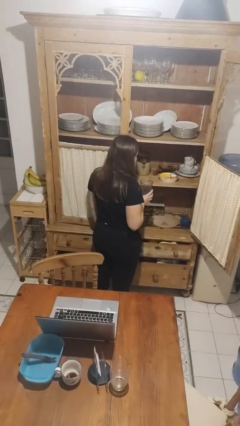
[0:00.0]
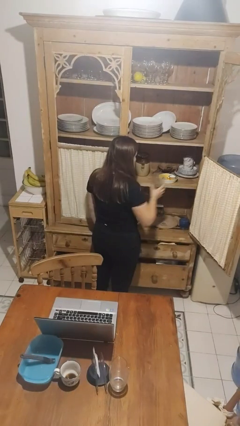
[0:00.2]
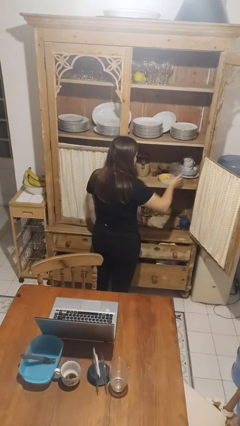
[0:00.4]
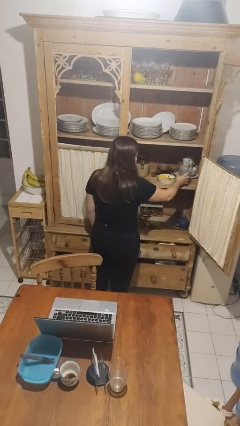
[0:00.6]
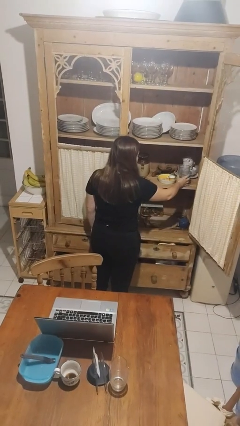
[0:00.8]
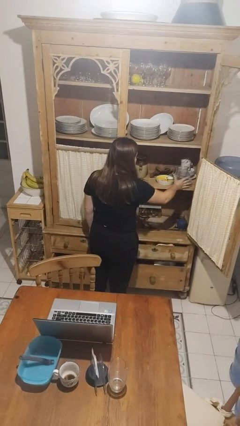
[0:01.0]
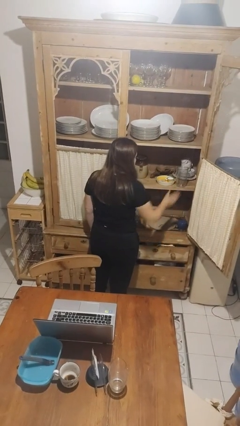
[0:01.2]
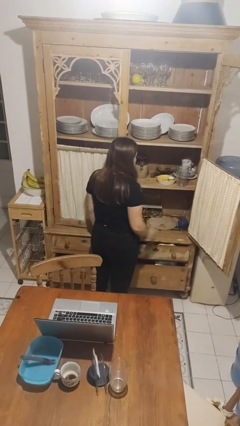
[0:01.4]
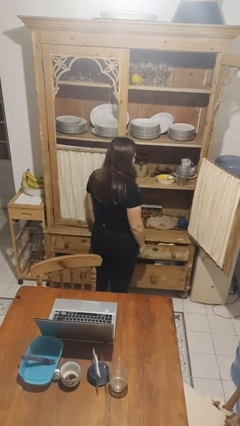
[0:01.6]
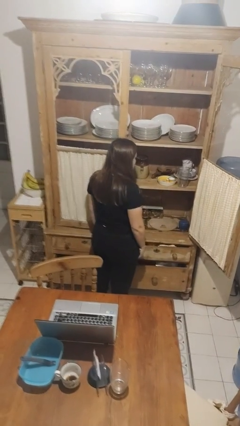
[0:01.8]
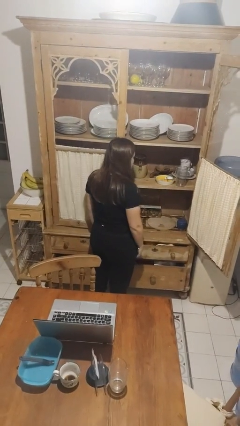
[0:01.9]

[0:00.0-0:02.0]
person puts object in cabinet

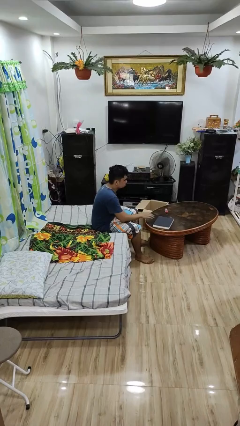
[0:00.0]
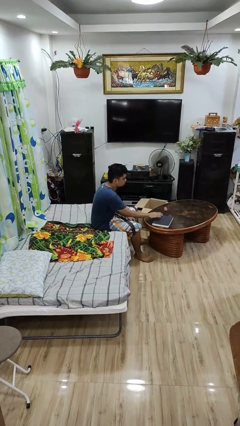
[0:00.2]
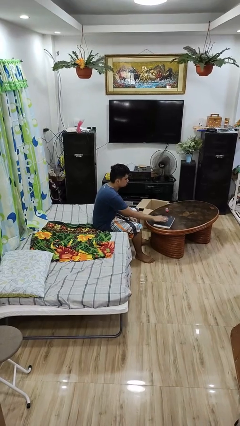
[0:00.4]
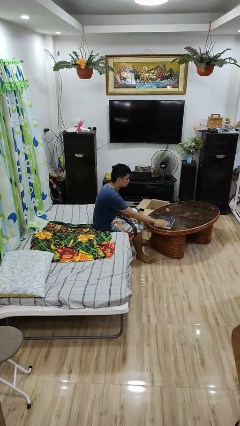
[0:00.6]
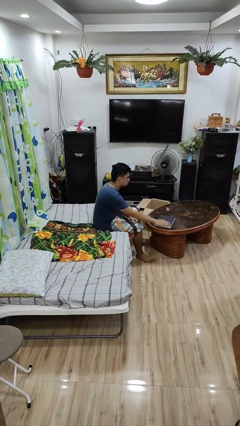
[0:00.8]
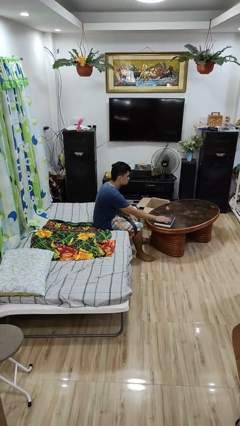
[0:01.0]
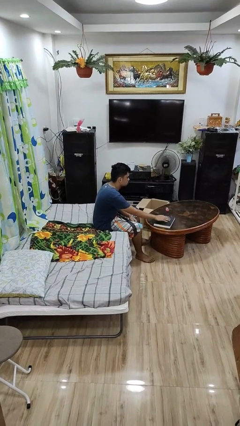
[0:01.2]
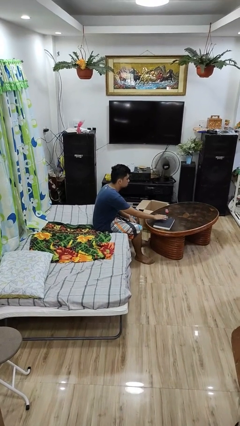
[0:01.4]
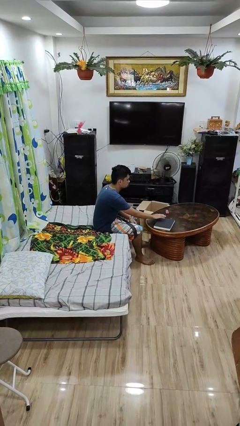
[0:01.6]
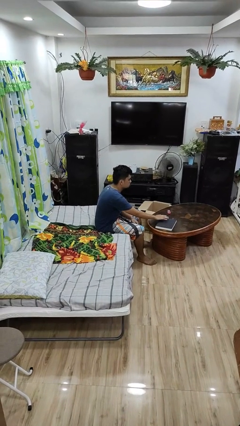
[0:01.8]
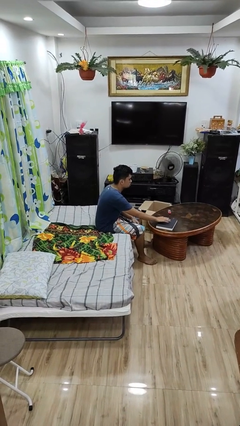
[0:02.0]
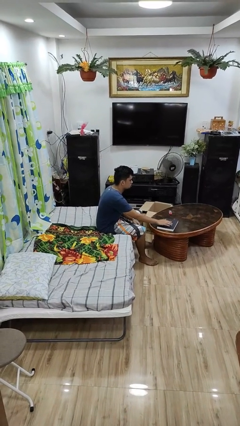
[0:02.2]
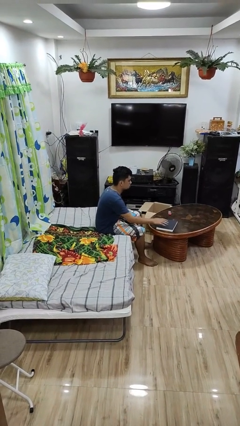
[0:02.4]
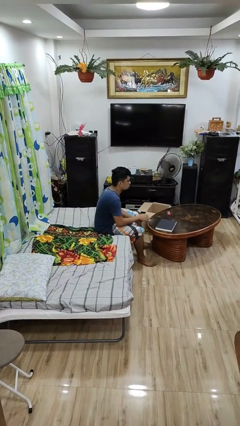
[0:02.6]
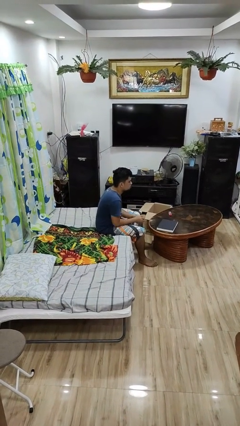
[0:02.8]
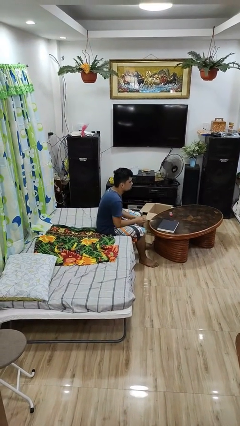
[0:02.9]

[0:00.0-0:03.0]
person waves hand over object

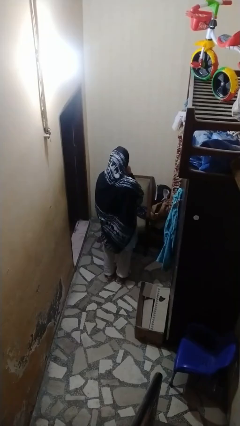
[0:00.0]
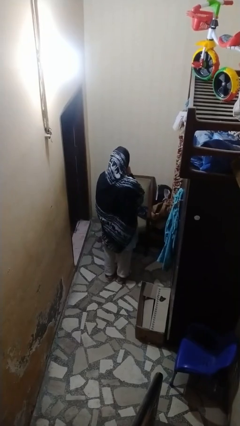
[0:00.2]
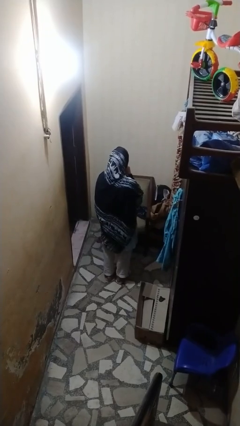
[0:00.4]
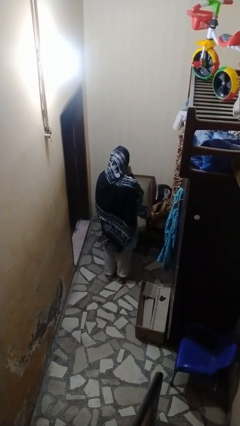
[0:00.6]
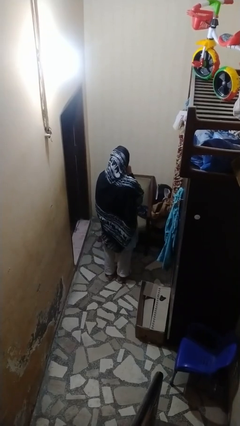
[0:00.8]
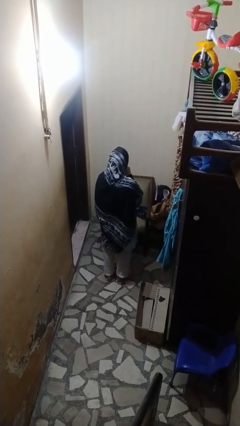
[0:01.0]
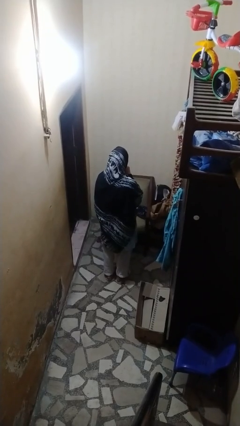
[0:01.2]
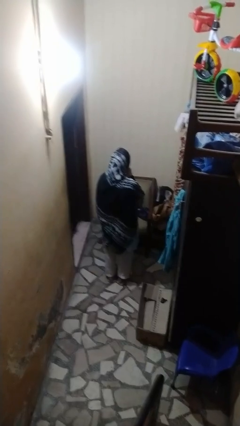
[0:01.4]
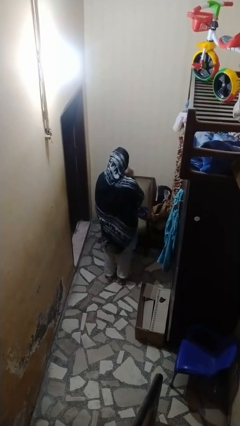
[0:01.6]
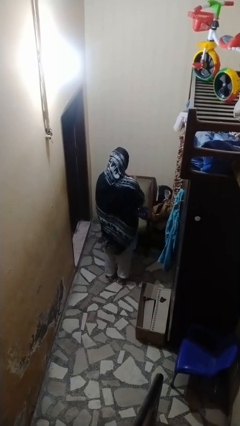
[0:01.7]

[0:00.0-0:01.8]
person gestures be quiet

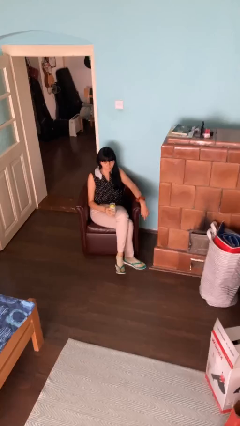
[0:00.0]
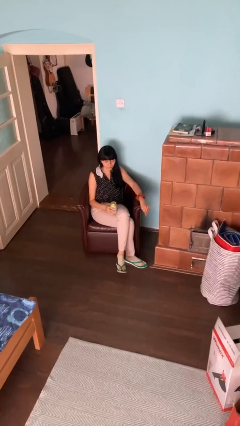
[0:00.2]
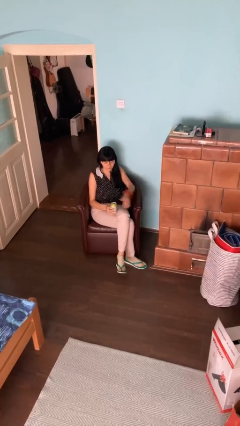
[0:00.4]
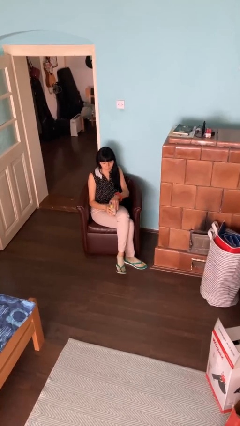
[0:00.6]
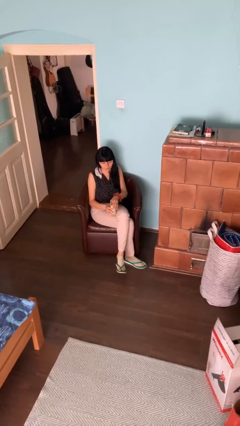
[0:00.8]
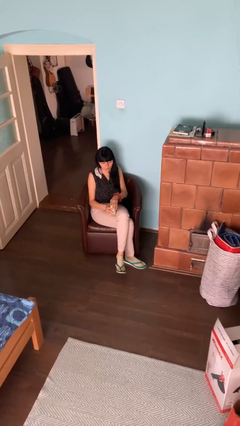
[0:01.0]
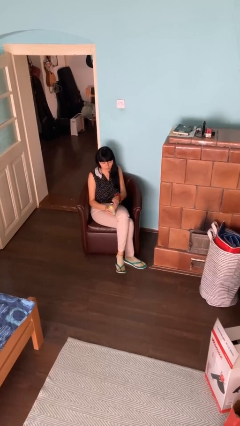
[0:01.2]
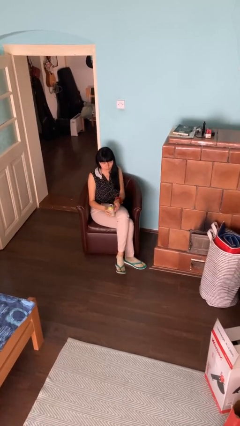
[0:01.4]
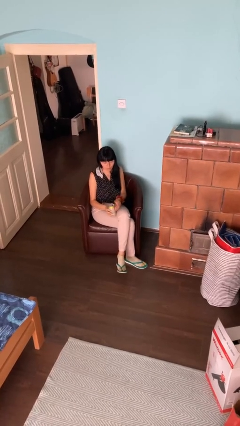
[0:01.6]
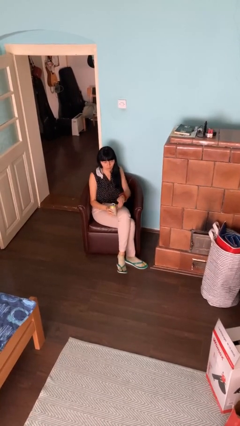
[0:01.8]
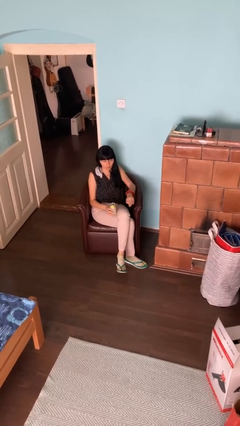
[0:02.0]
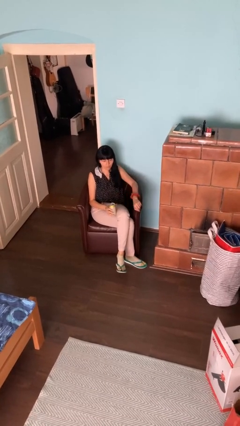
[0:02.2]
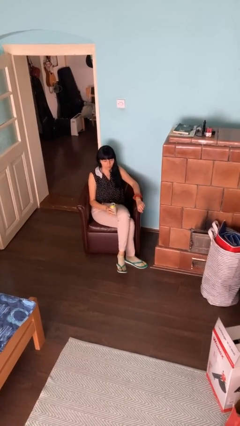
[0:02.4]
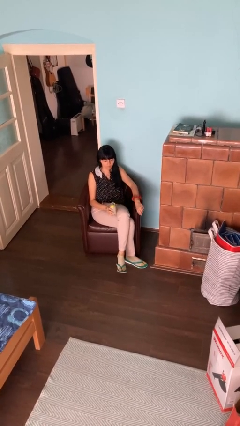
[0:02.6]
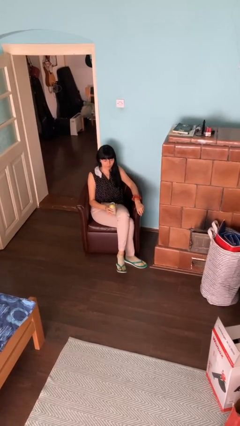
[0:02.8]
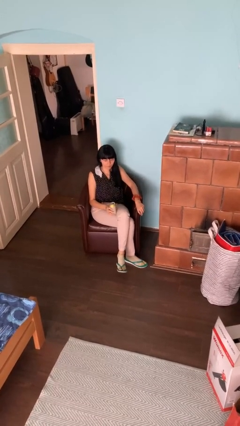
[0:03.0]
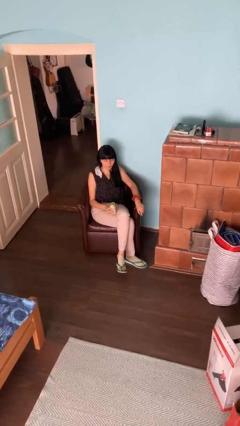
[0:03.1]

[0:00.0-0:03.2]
person opens beverage can

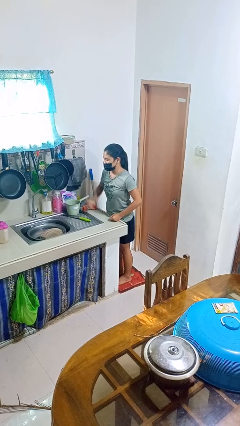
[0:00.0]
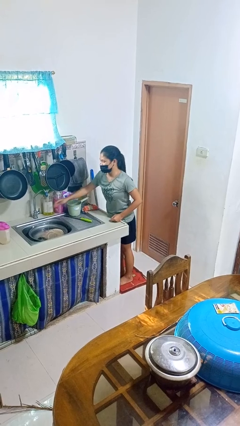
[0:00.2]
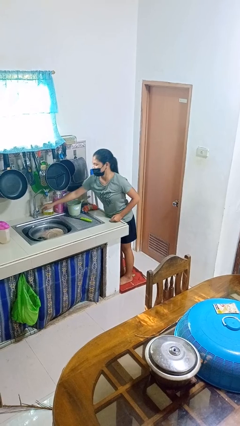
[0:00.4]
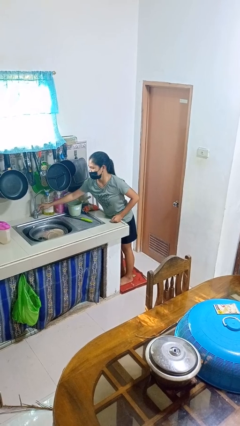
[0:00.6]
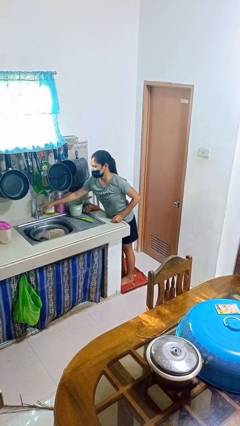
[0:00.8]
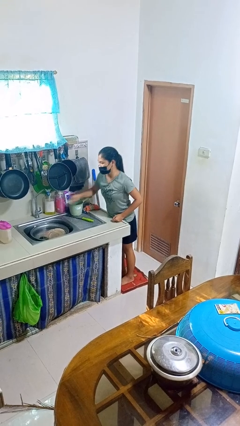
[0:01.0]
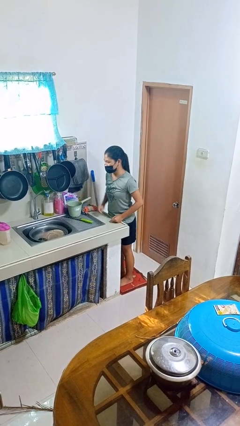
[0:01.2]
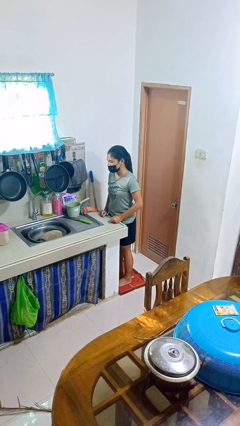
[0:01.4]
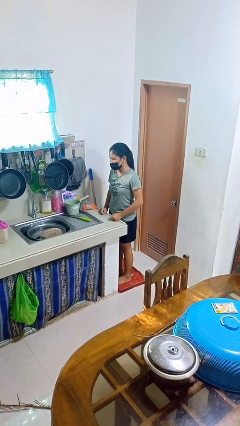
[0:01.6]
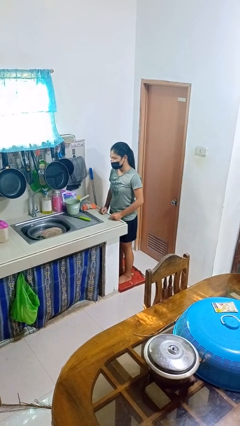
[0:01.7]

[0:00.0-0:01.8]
person turns off faucet

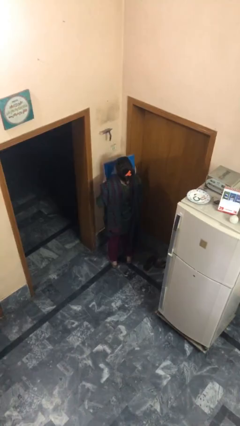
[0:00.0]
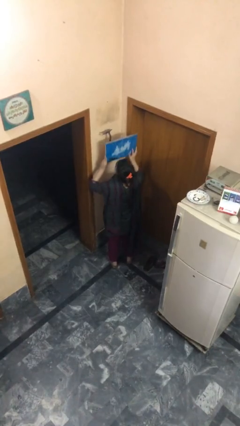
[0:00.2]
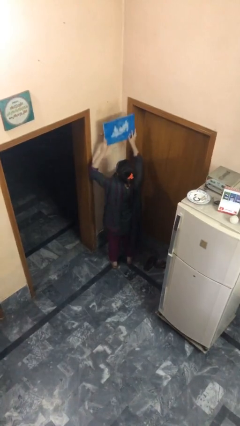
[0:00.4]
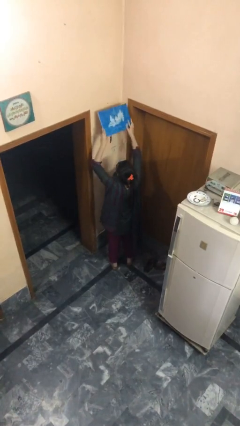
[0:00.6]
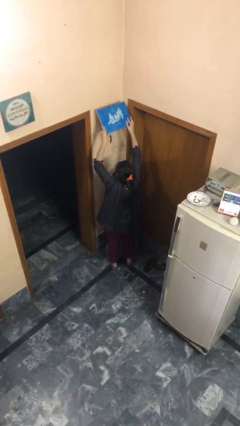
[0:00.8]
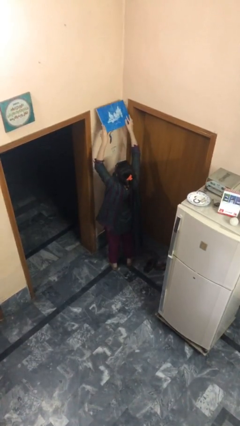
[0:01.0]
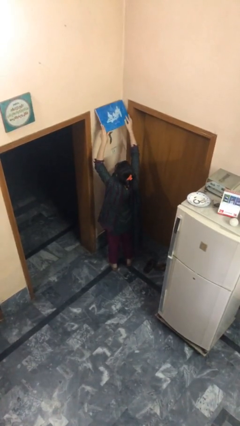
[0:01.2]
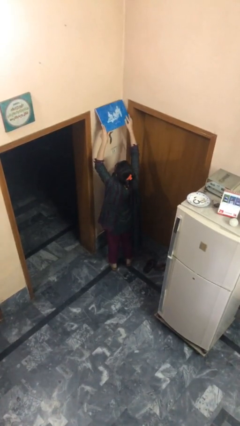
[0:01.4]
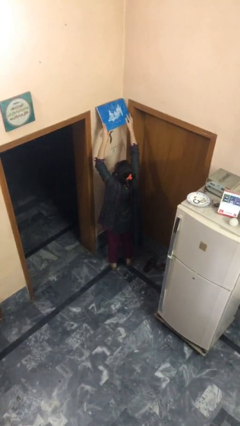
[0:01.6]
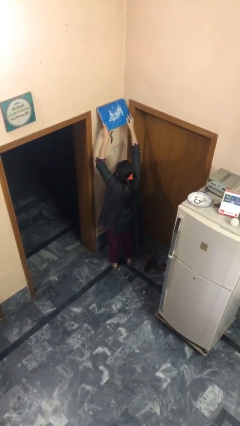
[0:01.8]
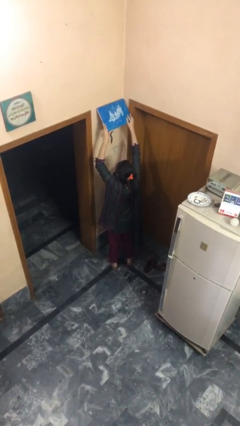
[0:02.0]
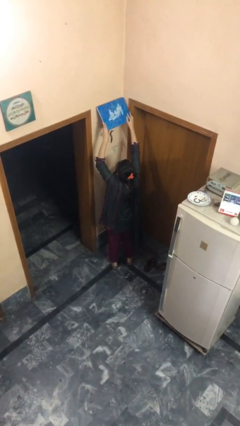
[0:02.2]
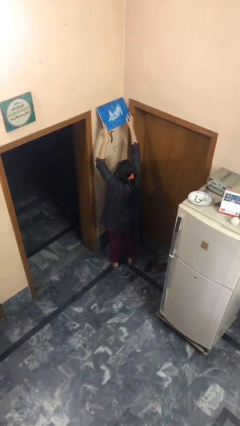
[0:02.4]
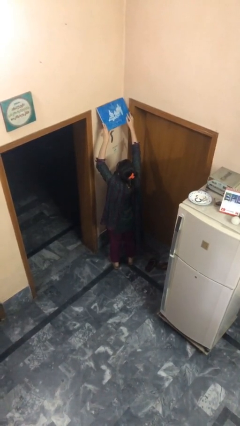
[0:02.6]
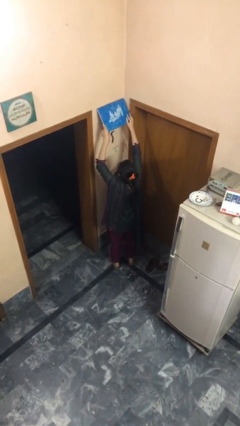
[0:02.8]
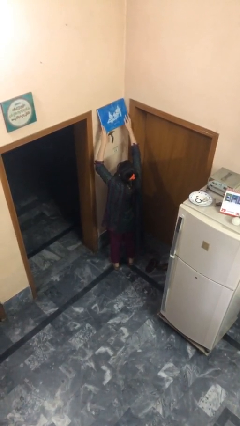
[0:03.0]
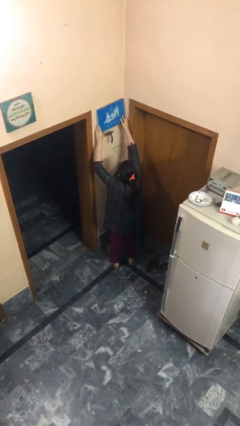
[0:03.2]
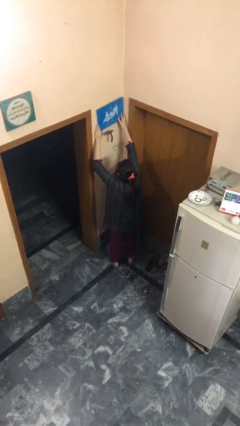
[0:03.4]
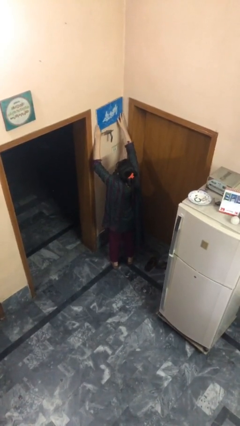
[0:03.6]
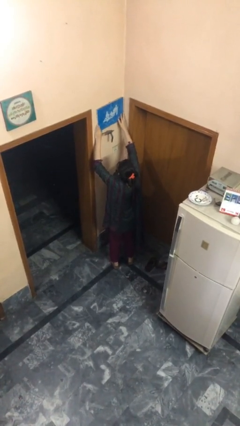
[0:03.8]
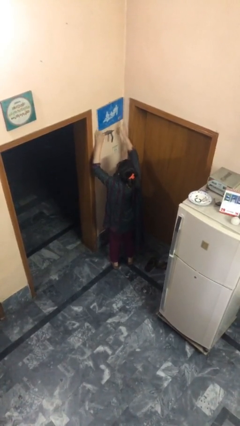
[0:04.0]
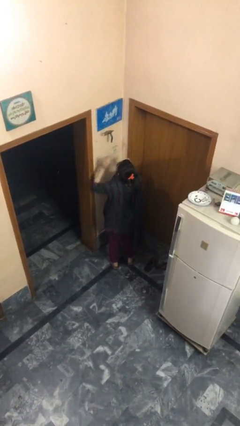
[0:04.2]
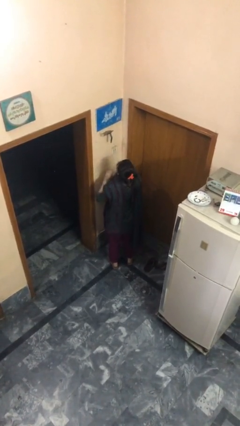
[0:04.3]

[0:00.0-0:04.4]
person puts up picture frame

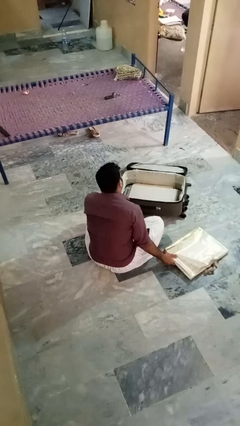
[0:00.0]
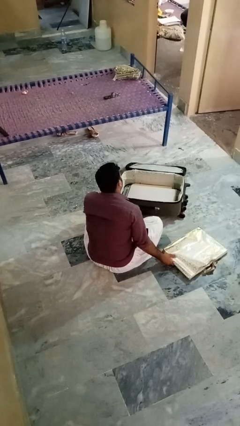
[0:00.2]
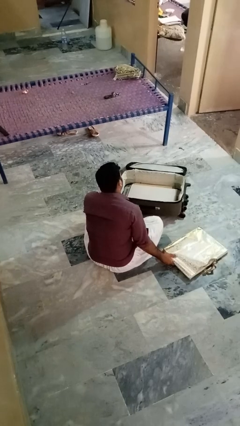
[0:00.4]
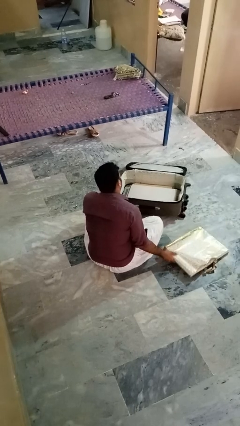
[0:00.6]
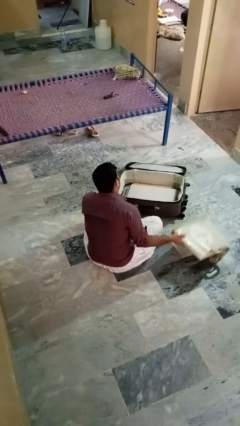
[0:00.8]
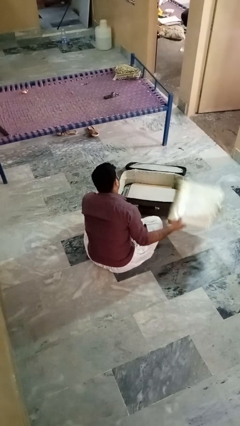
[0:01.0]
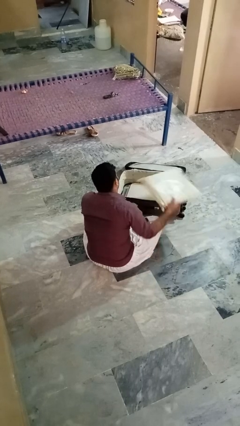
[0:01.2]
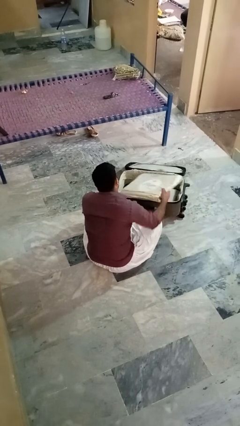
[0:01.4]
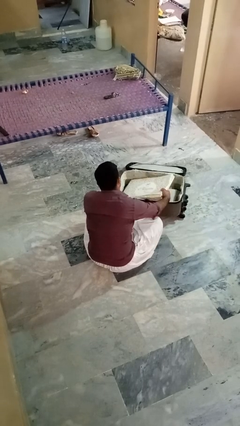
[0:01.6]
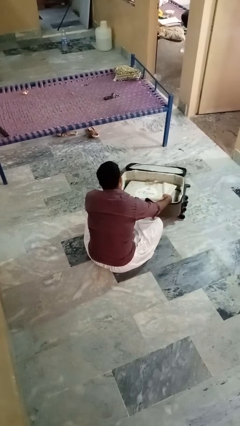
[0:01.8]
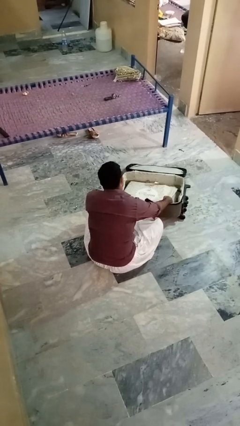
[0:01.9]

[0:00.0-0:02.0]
person puts object into bag
